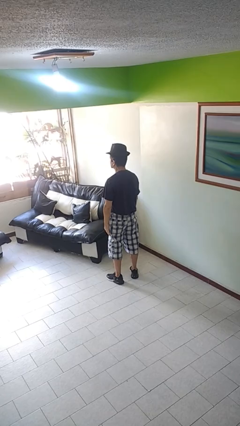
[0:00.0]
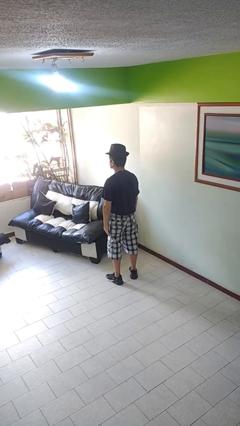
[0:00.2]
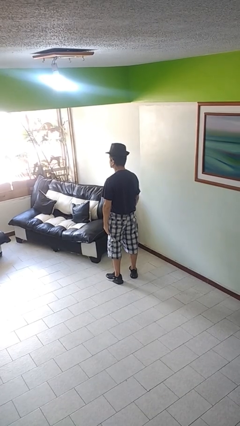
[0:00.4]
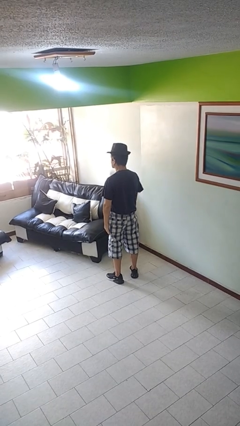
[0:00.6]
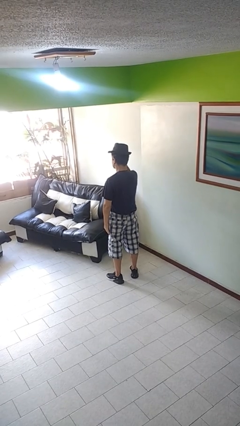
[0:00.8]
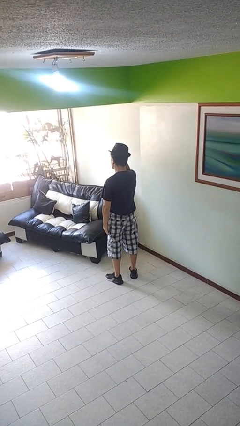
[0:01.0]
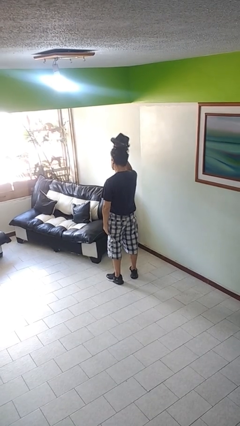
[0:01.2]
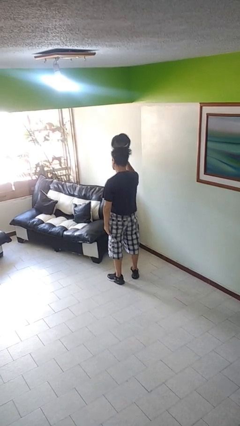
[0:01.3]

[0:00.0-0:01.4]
person takes off hat

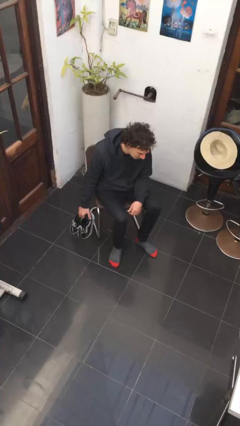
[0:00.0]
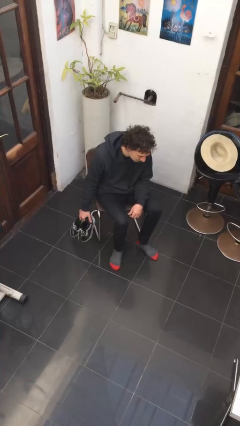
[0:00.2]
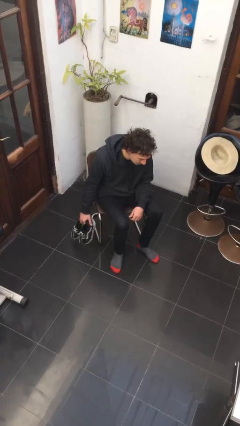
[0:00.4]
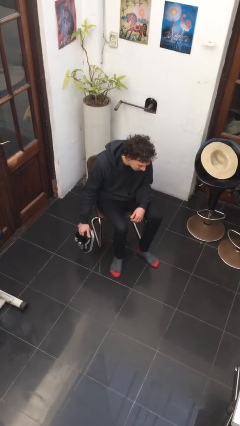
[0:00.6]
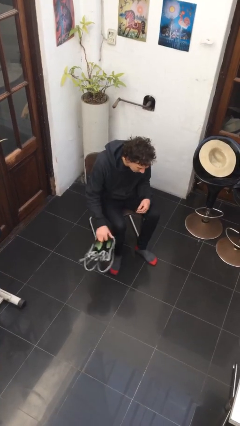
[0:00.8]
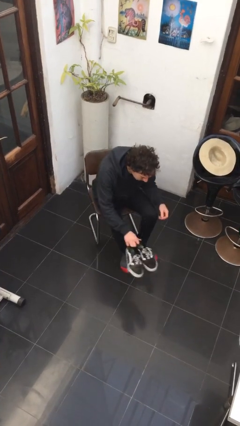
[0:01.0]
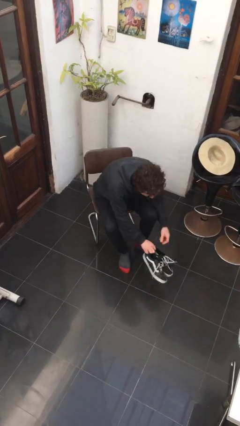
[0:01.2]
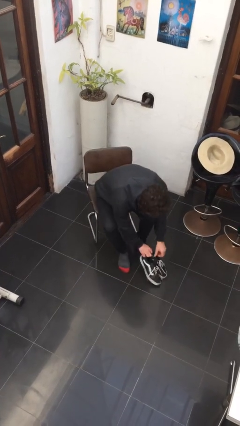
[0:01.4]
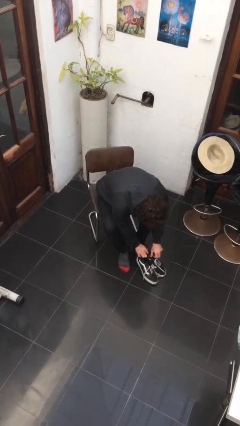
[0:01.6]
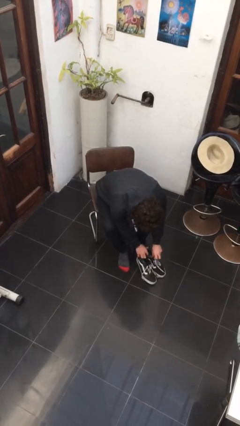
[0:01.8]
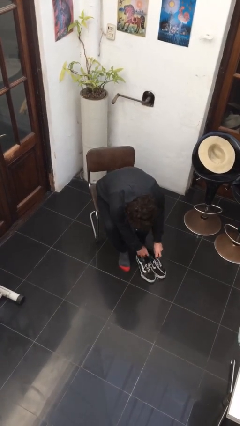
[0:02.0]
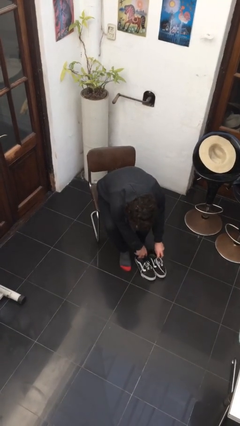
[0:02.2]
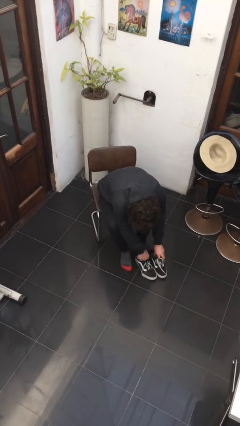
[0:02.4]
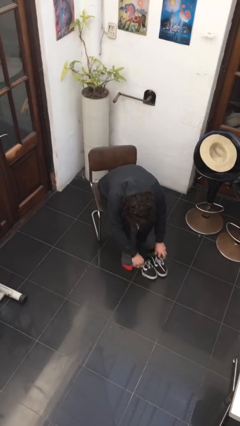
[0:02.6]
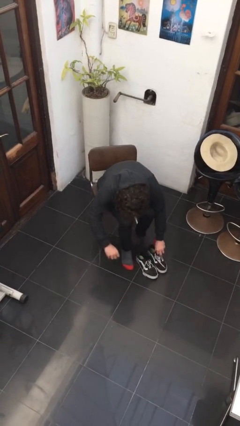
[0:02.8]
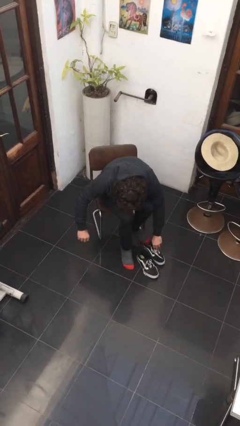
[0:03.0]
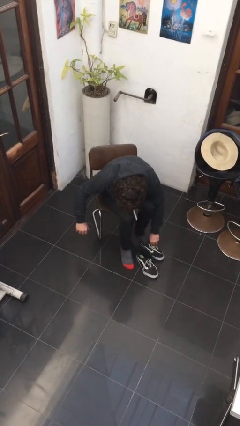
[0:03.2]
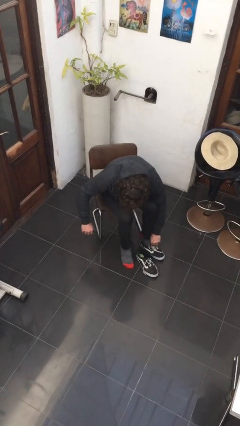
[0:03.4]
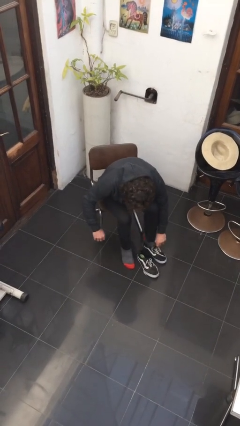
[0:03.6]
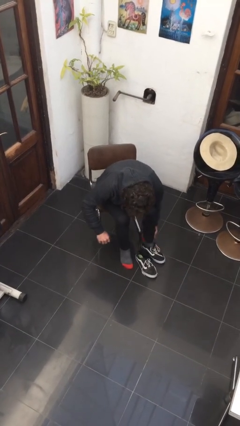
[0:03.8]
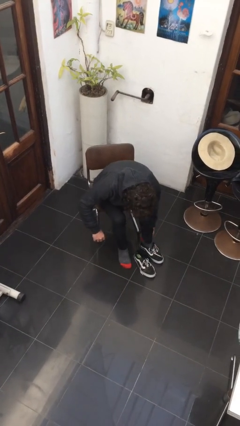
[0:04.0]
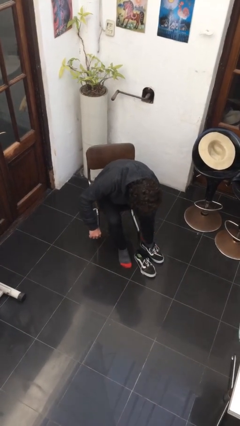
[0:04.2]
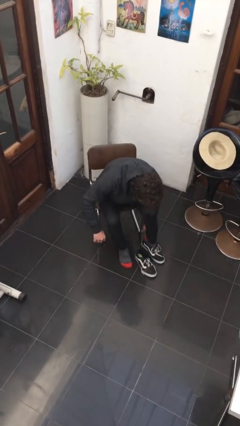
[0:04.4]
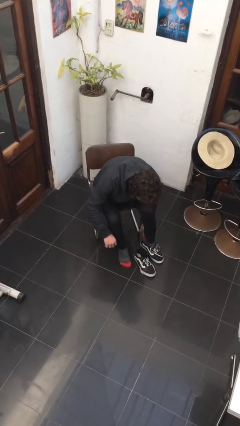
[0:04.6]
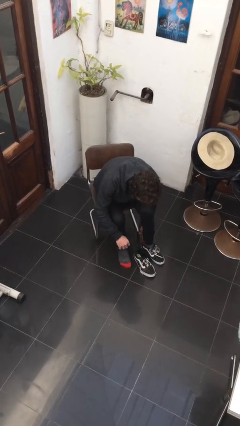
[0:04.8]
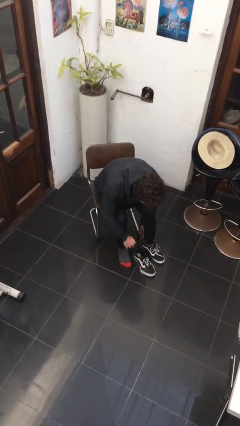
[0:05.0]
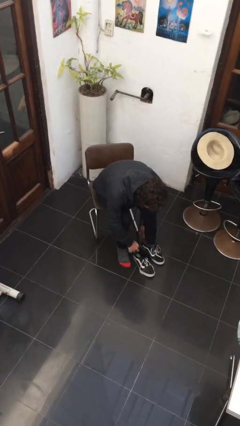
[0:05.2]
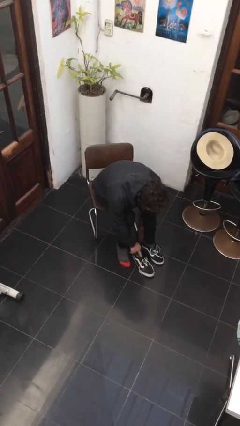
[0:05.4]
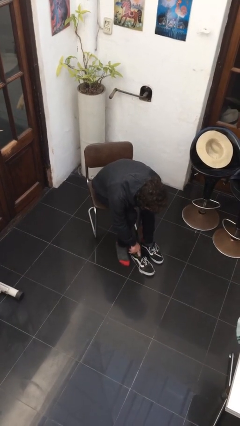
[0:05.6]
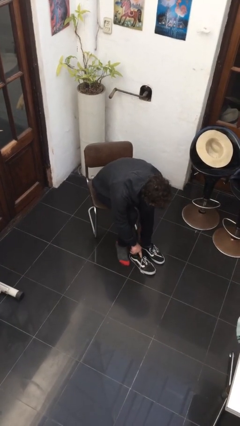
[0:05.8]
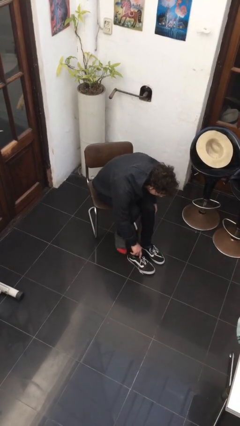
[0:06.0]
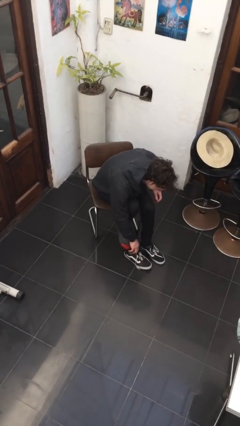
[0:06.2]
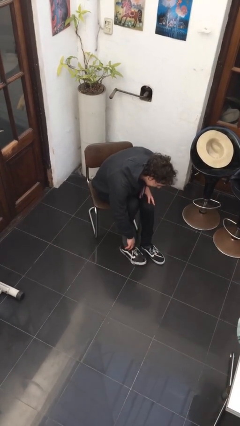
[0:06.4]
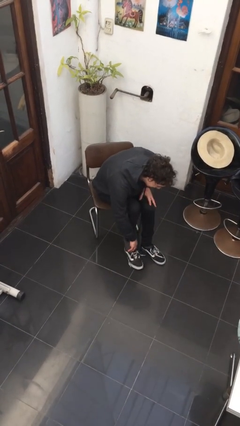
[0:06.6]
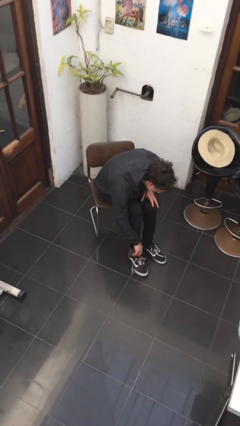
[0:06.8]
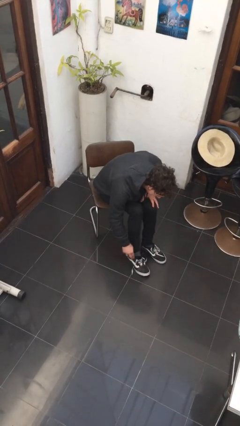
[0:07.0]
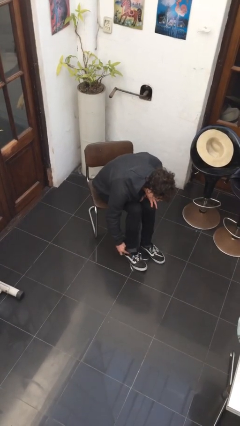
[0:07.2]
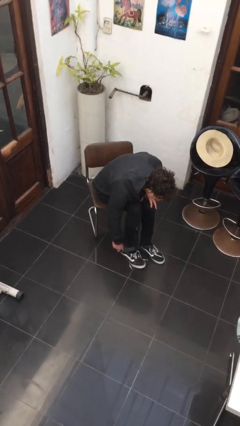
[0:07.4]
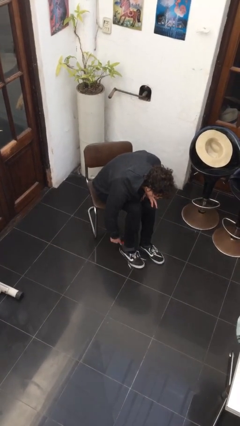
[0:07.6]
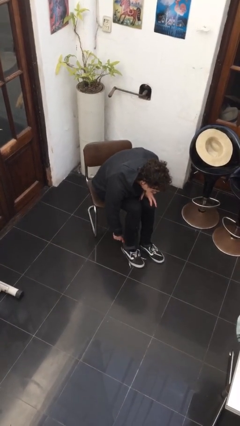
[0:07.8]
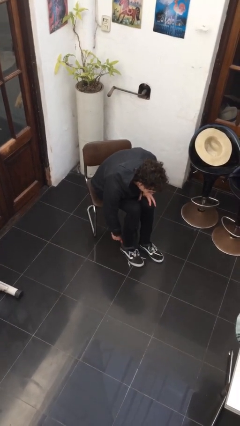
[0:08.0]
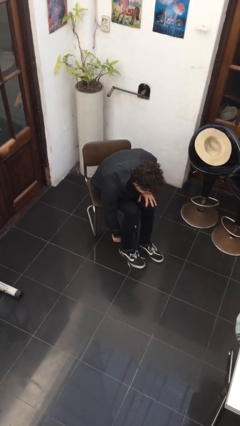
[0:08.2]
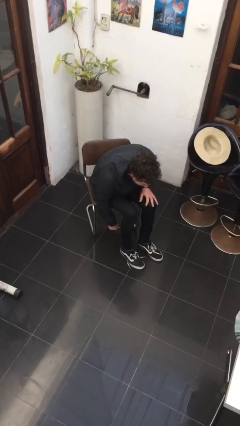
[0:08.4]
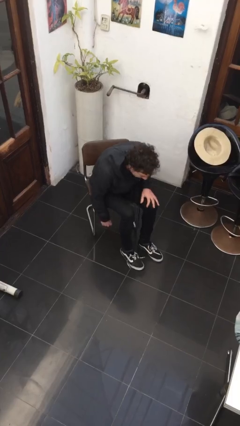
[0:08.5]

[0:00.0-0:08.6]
person puts on shoes

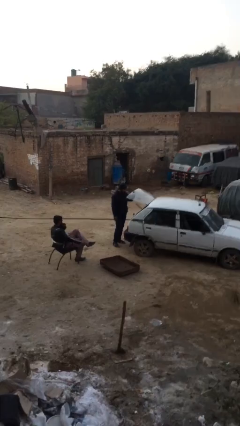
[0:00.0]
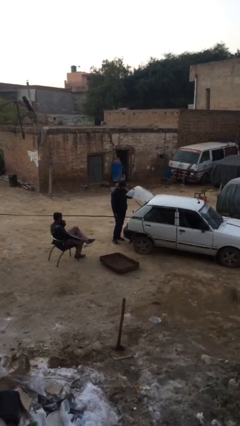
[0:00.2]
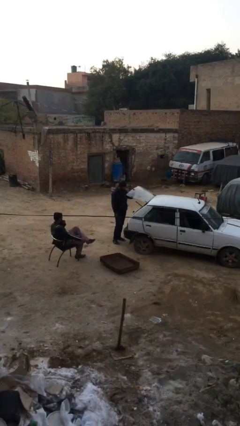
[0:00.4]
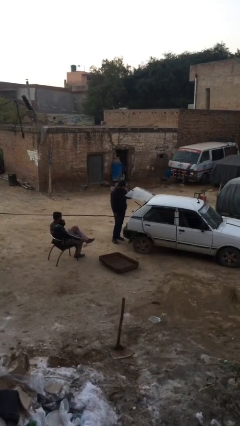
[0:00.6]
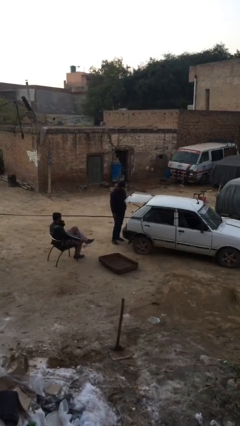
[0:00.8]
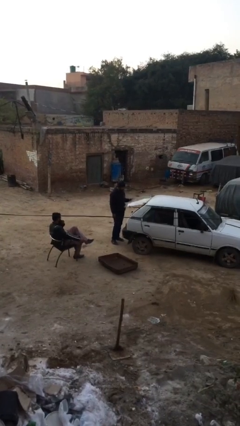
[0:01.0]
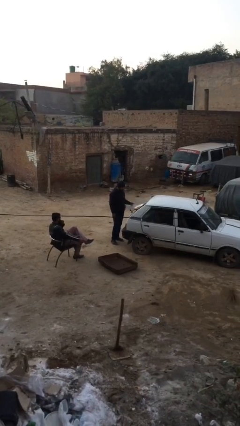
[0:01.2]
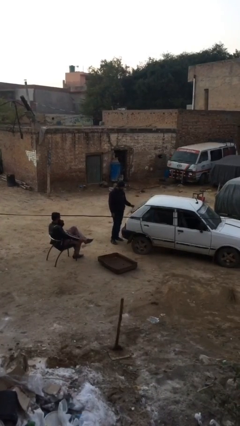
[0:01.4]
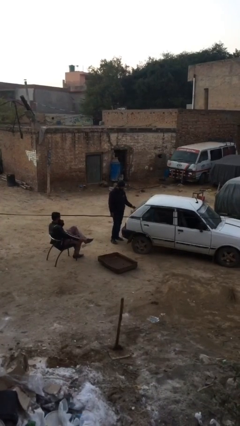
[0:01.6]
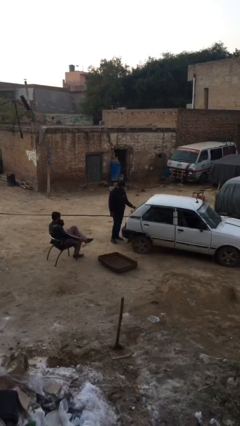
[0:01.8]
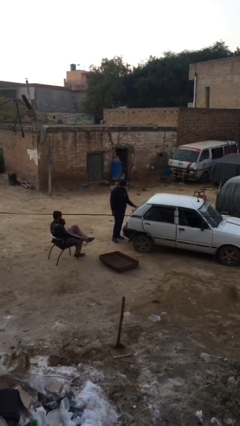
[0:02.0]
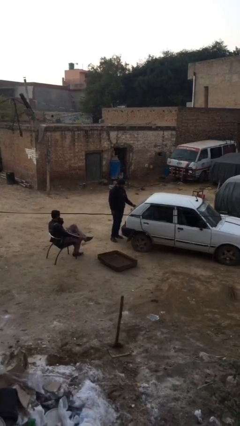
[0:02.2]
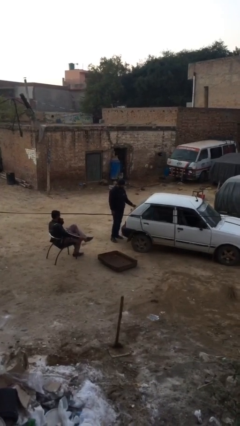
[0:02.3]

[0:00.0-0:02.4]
person closes car trunk

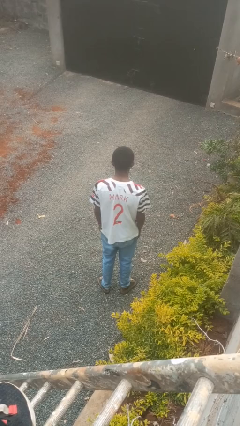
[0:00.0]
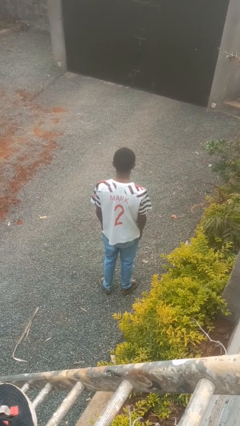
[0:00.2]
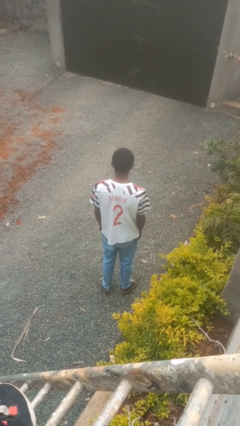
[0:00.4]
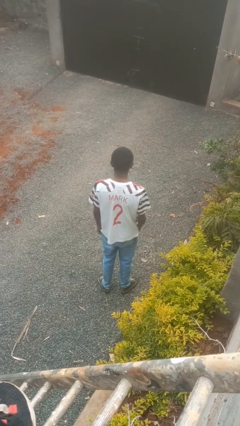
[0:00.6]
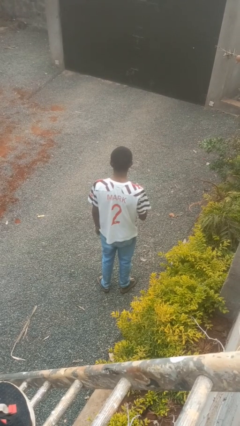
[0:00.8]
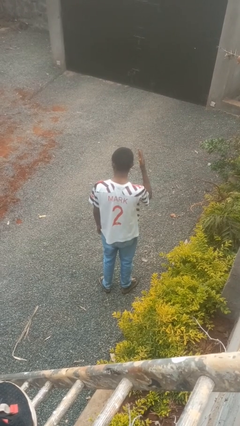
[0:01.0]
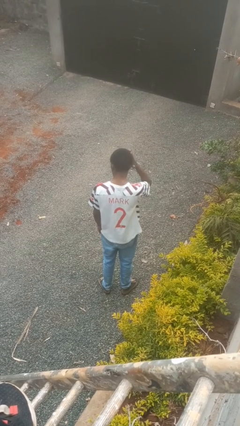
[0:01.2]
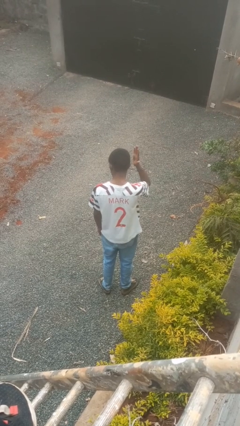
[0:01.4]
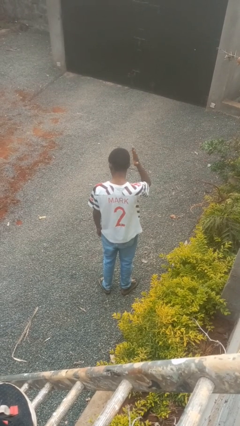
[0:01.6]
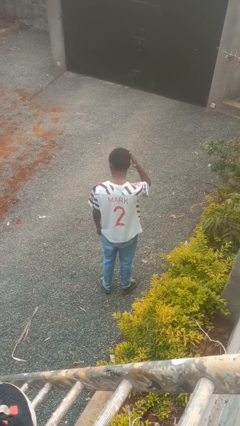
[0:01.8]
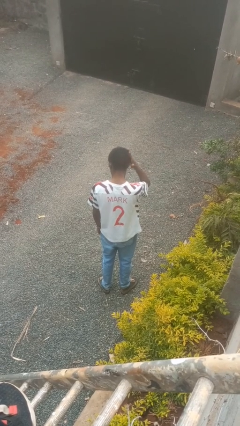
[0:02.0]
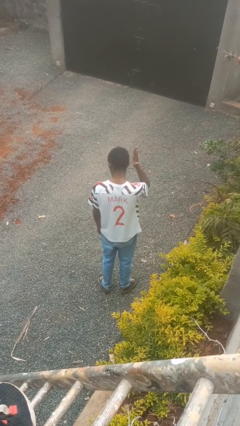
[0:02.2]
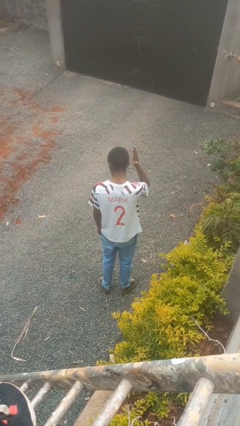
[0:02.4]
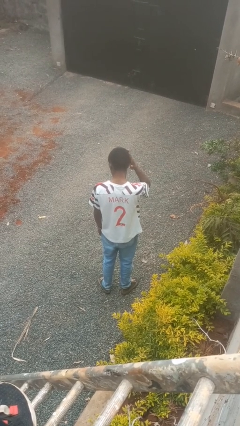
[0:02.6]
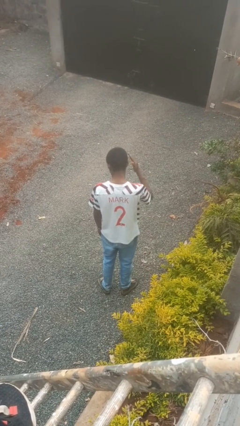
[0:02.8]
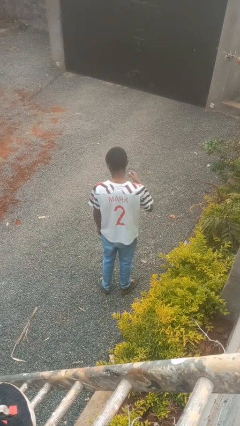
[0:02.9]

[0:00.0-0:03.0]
person pats head

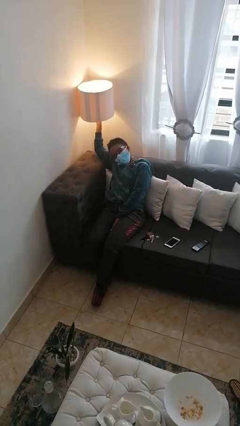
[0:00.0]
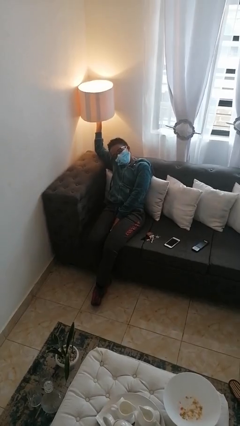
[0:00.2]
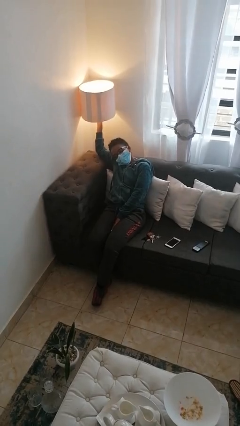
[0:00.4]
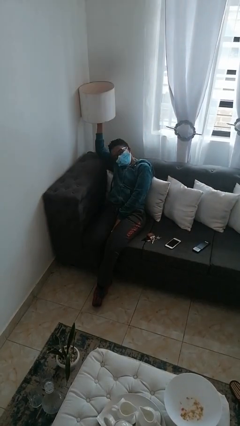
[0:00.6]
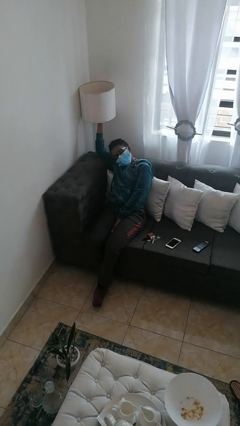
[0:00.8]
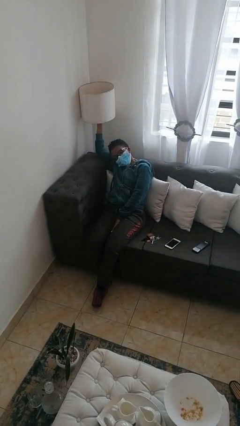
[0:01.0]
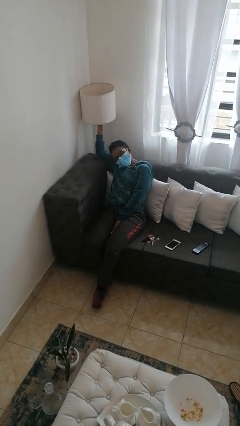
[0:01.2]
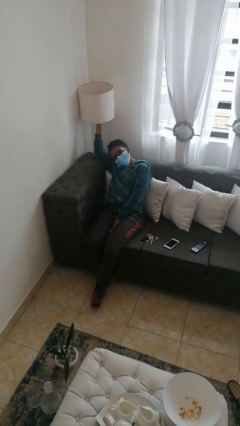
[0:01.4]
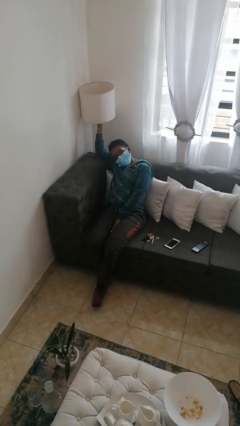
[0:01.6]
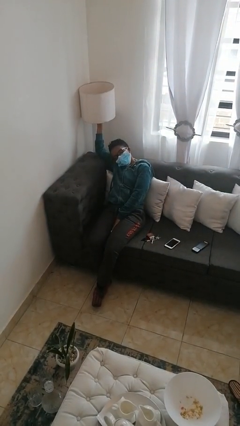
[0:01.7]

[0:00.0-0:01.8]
person turns off lamp

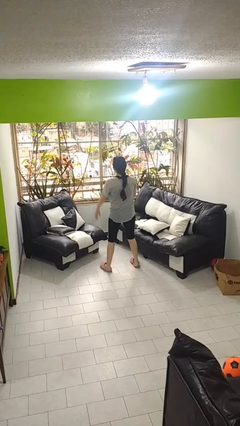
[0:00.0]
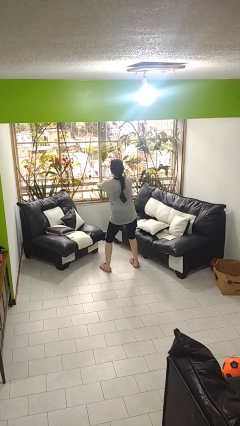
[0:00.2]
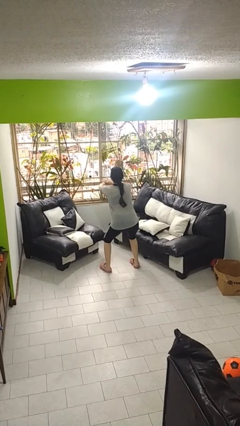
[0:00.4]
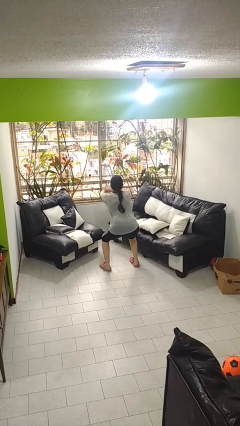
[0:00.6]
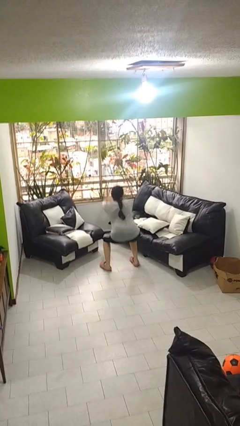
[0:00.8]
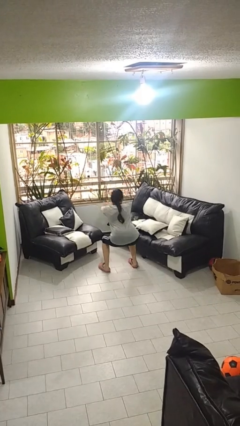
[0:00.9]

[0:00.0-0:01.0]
person squats
